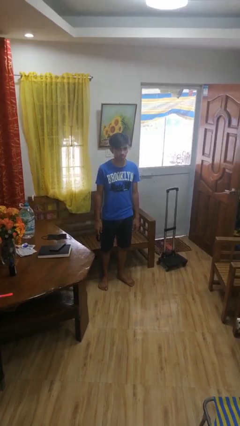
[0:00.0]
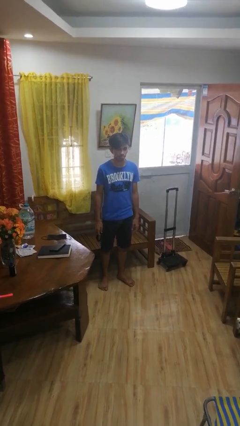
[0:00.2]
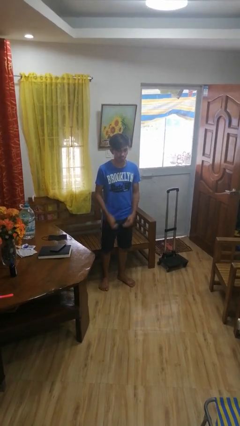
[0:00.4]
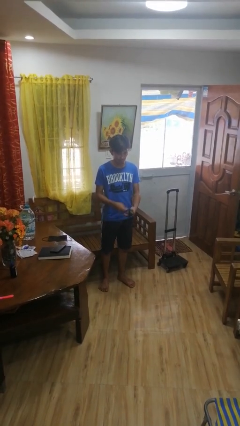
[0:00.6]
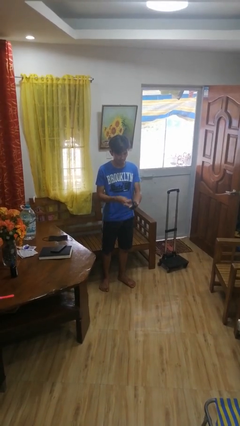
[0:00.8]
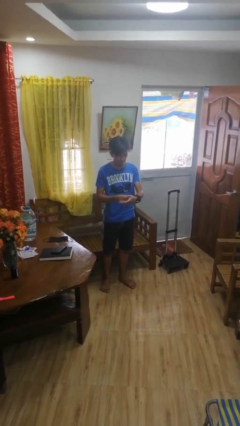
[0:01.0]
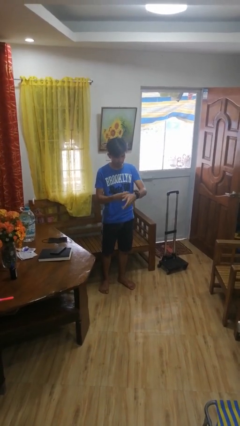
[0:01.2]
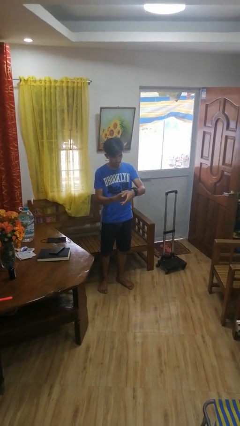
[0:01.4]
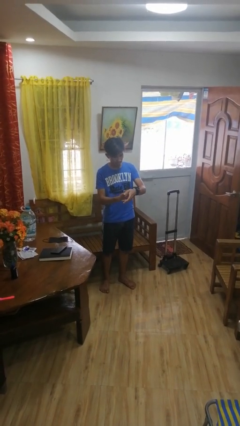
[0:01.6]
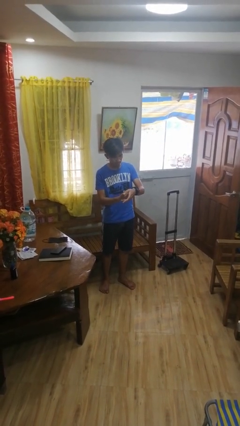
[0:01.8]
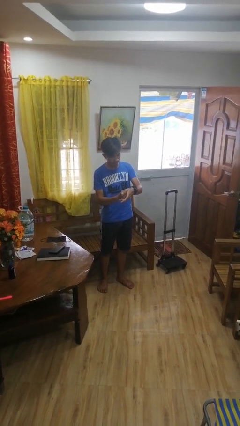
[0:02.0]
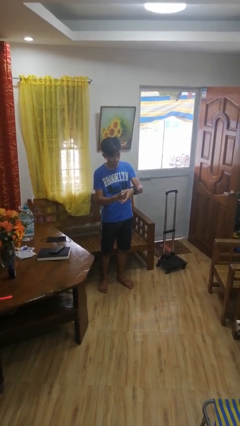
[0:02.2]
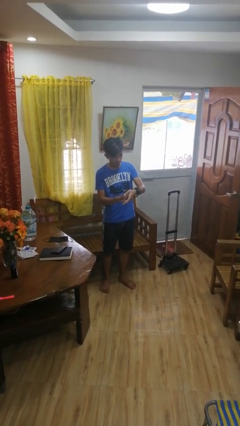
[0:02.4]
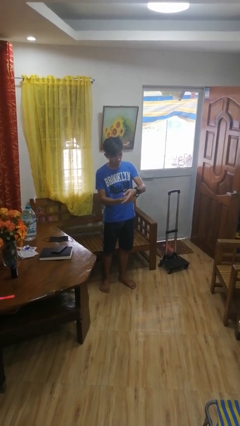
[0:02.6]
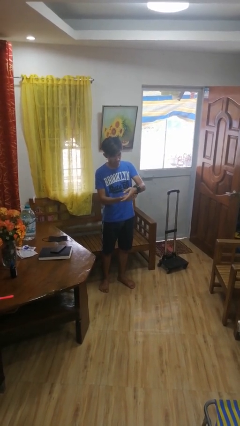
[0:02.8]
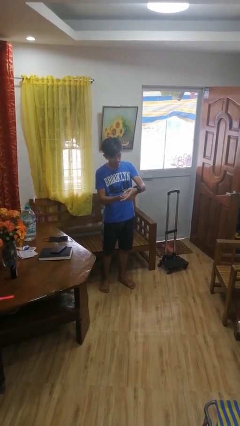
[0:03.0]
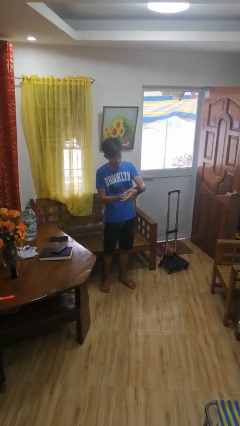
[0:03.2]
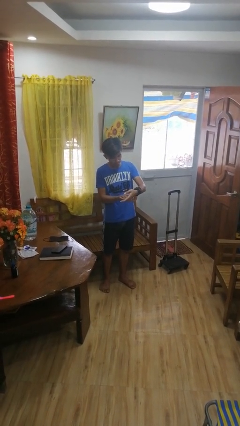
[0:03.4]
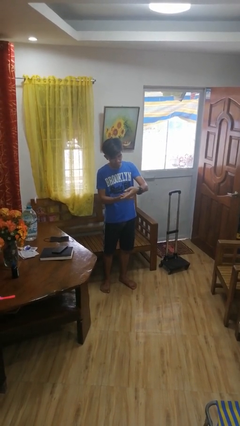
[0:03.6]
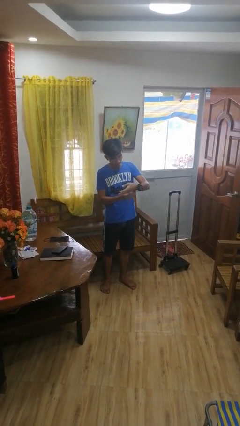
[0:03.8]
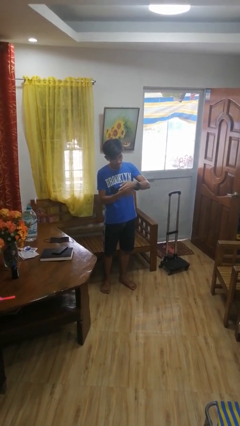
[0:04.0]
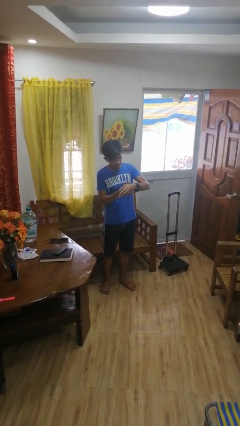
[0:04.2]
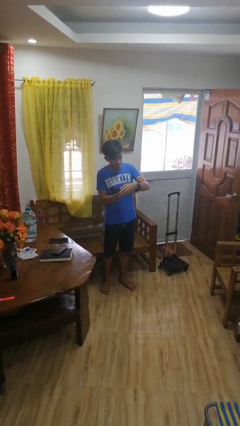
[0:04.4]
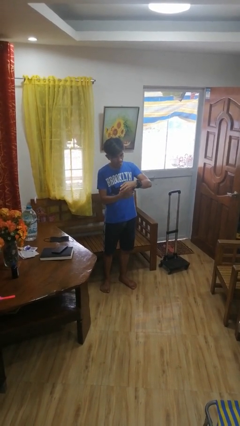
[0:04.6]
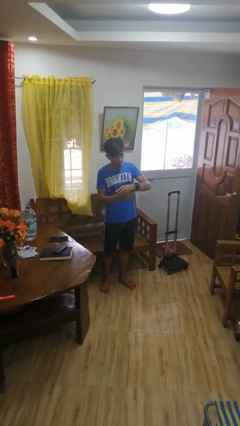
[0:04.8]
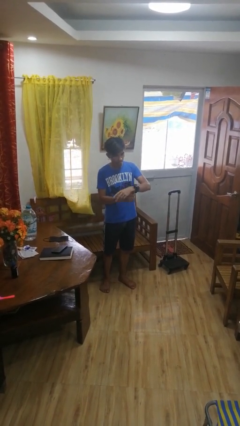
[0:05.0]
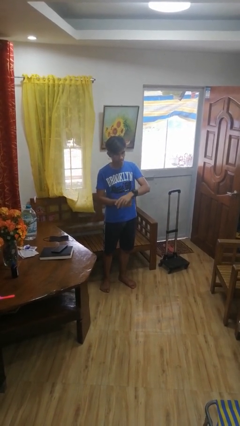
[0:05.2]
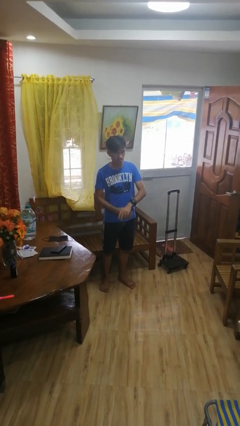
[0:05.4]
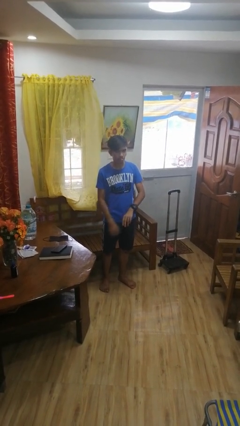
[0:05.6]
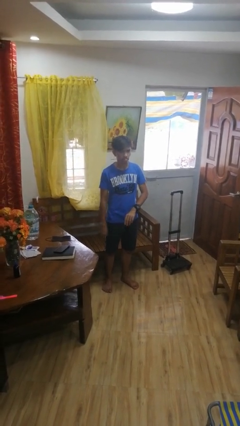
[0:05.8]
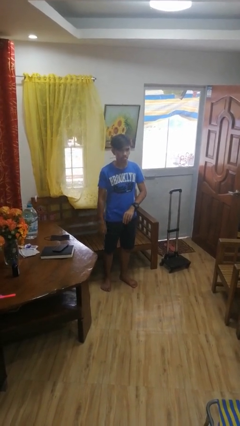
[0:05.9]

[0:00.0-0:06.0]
person puts on wristwatch

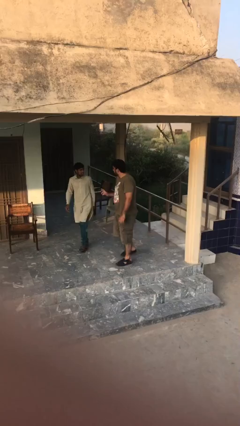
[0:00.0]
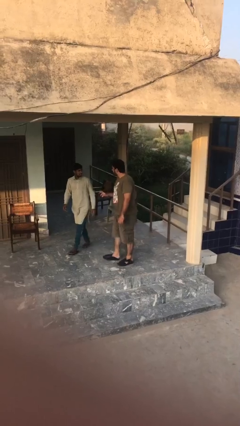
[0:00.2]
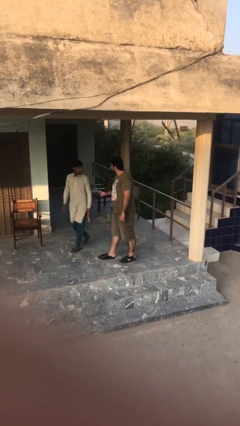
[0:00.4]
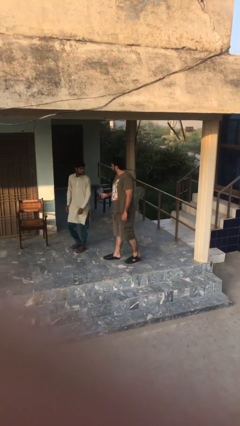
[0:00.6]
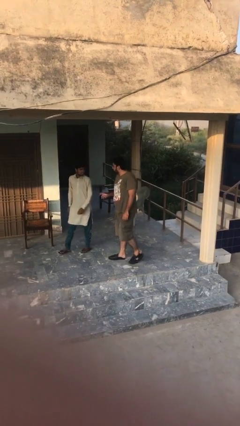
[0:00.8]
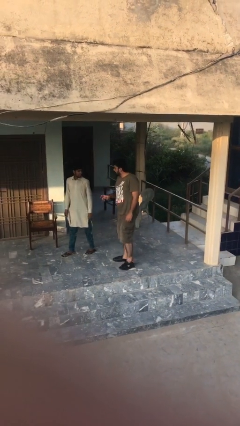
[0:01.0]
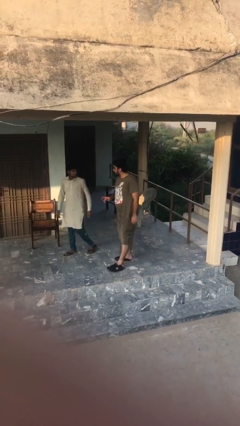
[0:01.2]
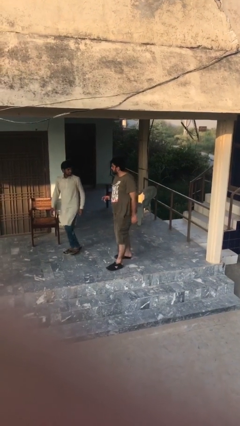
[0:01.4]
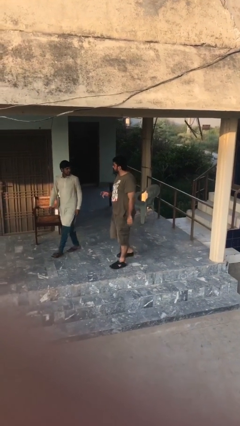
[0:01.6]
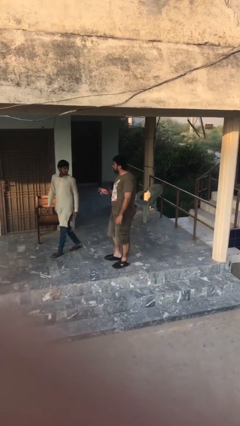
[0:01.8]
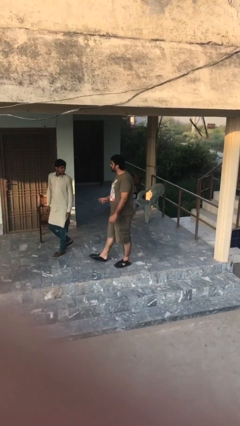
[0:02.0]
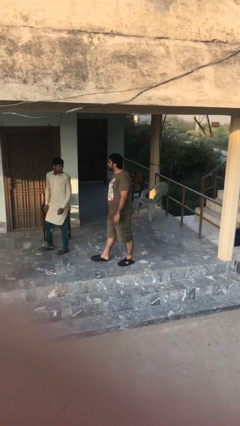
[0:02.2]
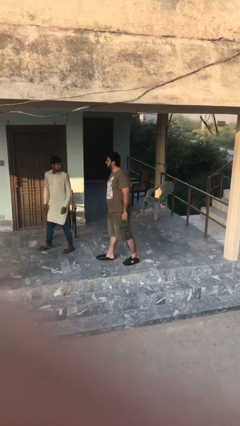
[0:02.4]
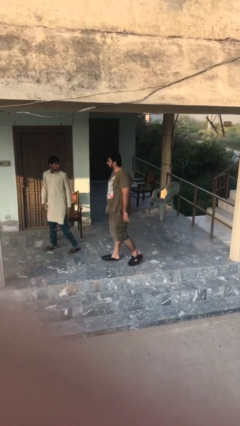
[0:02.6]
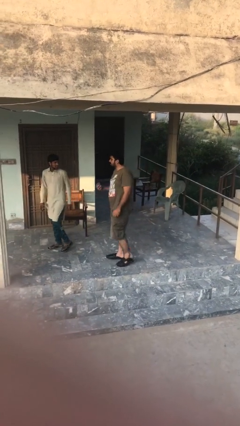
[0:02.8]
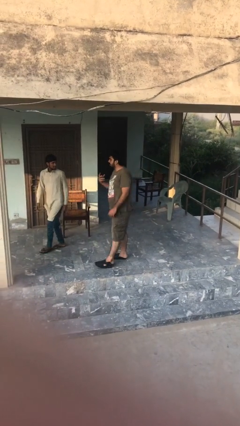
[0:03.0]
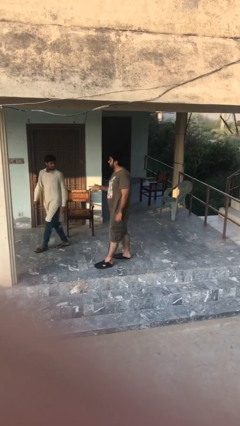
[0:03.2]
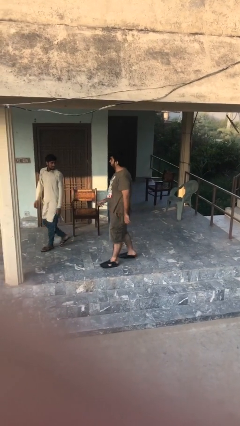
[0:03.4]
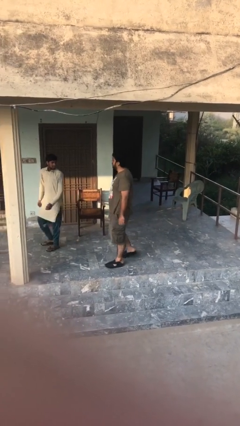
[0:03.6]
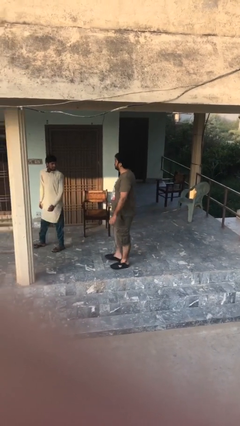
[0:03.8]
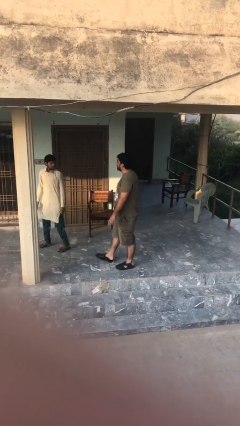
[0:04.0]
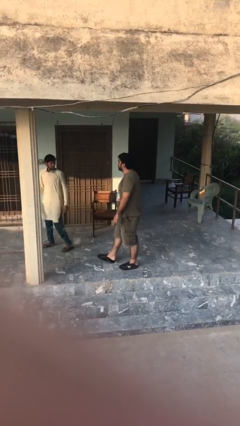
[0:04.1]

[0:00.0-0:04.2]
person talks to person

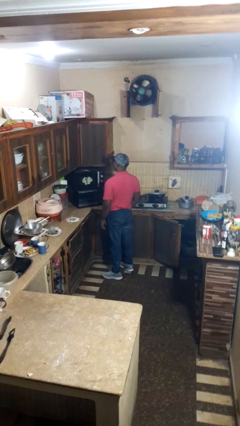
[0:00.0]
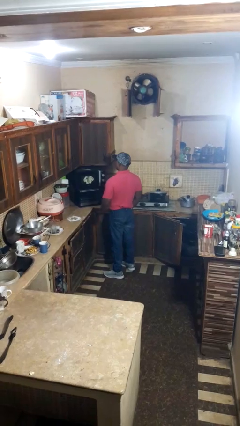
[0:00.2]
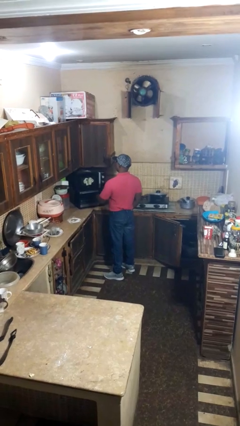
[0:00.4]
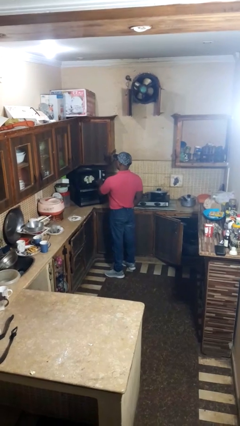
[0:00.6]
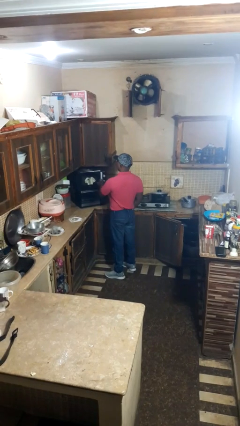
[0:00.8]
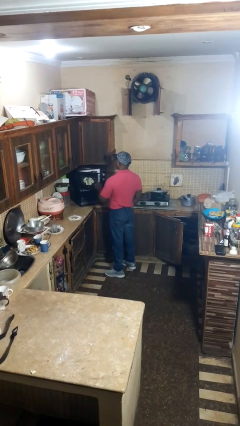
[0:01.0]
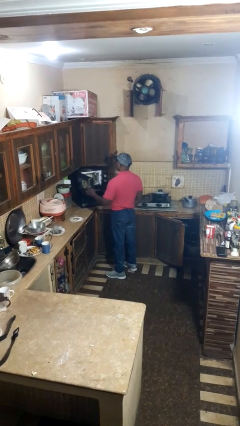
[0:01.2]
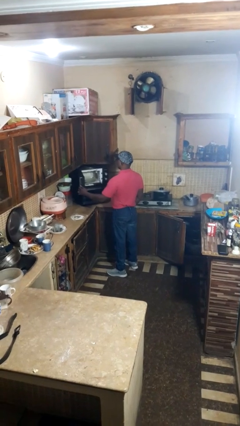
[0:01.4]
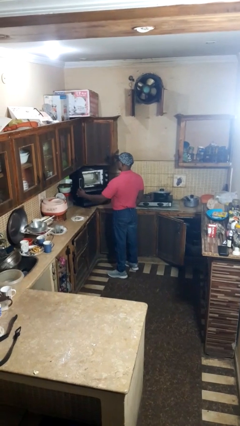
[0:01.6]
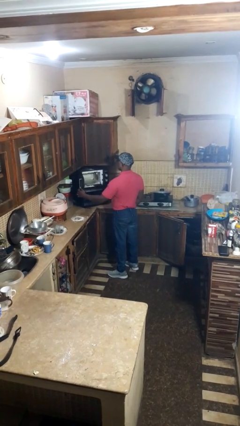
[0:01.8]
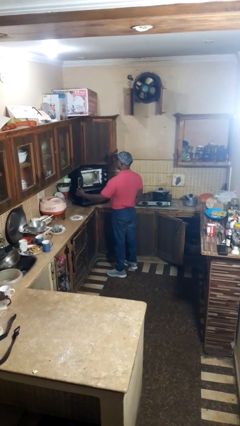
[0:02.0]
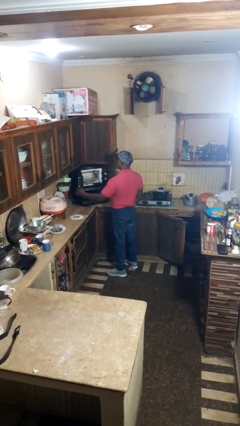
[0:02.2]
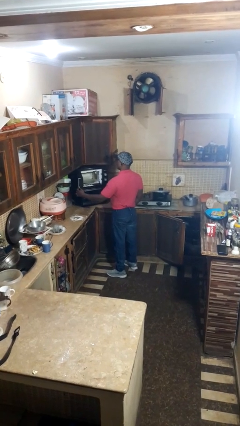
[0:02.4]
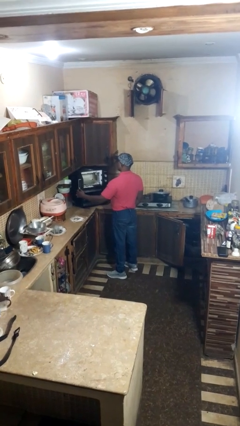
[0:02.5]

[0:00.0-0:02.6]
person opens microwave

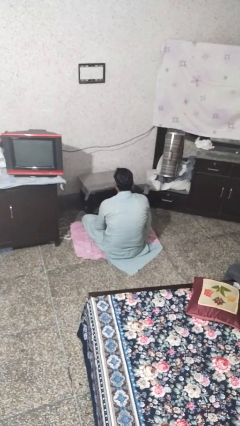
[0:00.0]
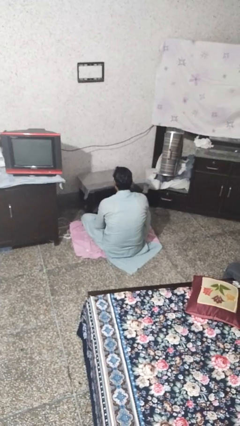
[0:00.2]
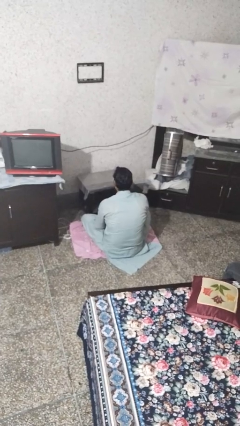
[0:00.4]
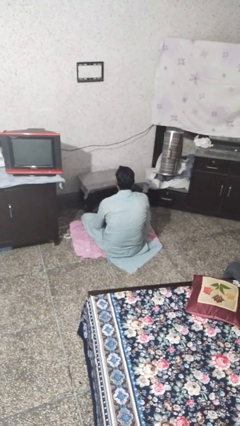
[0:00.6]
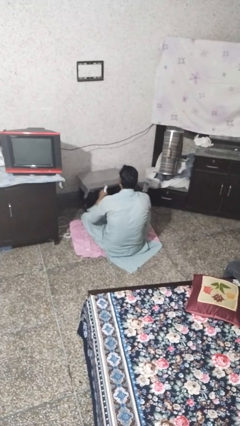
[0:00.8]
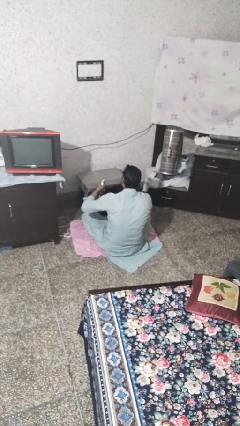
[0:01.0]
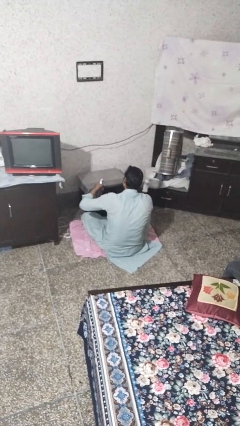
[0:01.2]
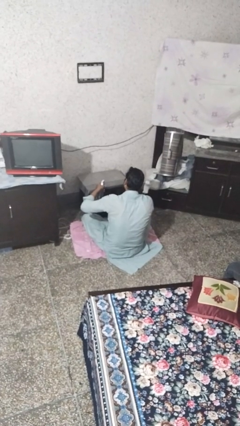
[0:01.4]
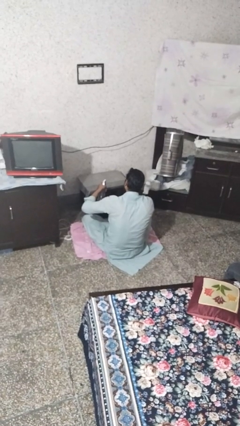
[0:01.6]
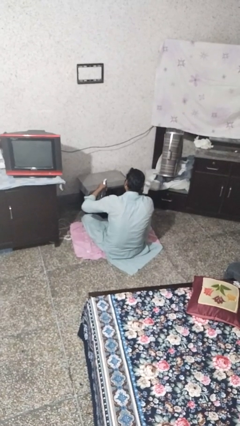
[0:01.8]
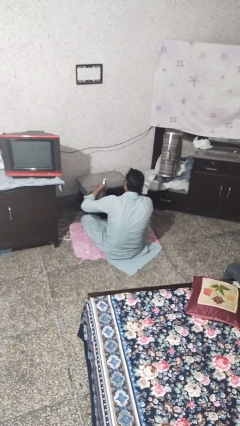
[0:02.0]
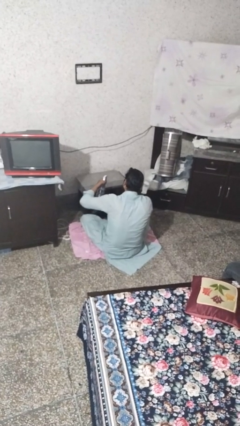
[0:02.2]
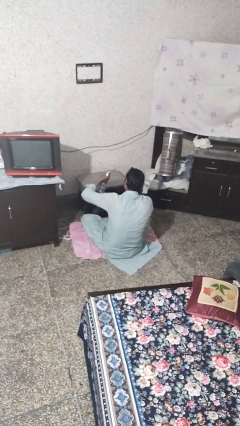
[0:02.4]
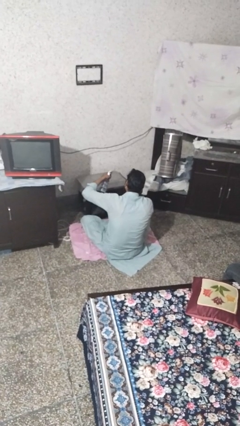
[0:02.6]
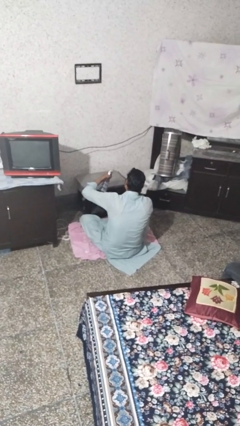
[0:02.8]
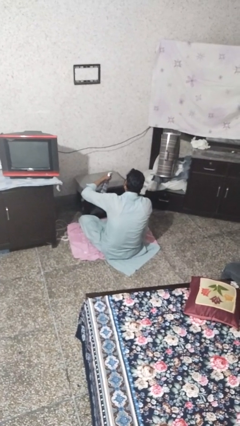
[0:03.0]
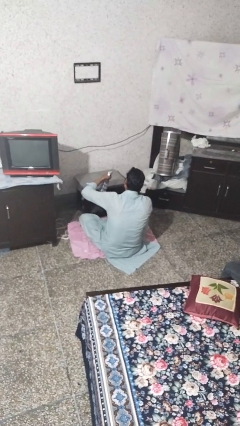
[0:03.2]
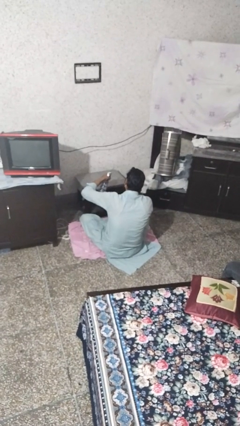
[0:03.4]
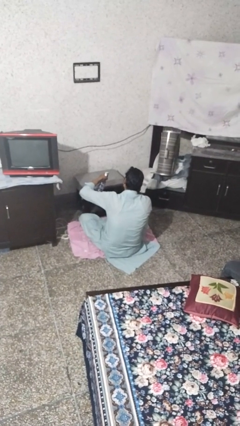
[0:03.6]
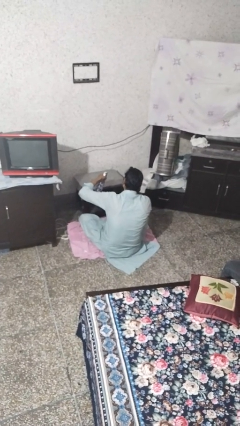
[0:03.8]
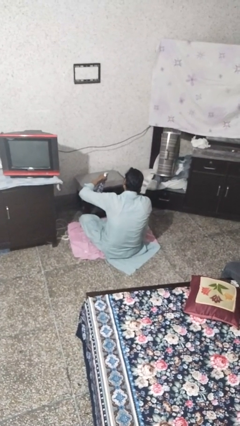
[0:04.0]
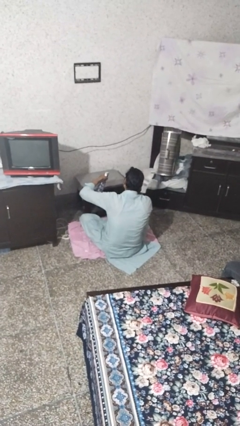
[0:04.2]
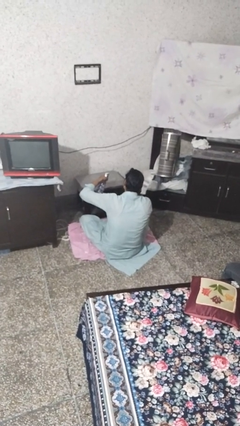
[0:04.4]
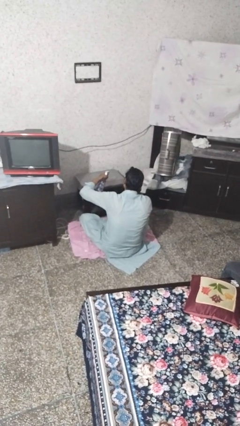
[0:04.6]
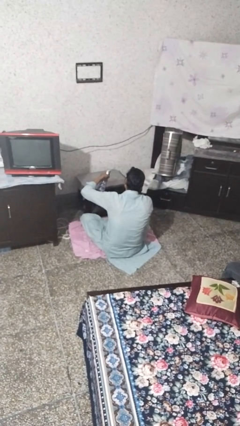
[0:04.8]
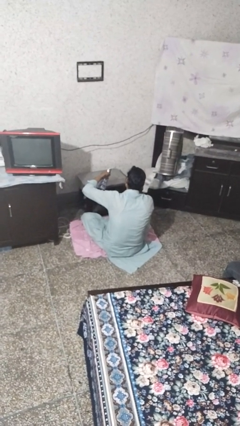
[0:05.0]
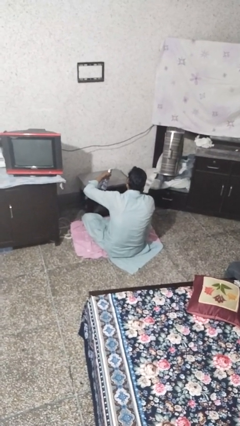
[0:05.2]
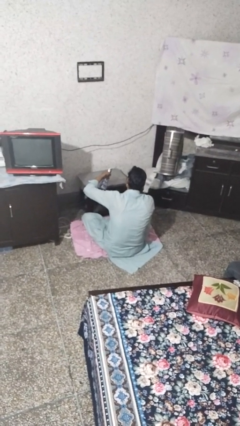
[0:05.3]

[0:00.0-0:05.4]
person sprays from bottle
